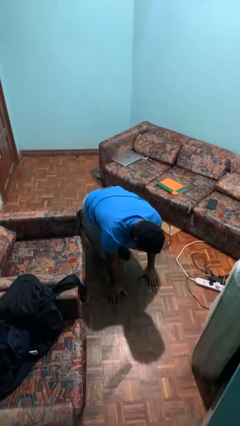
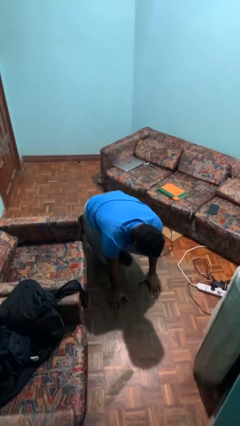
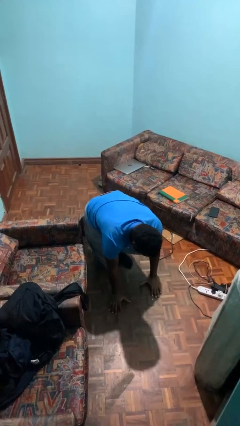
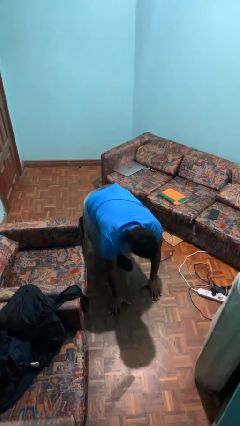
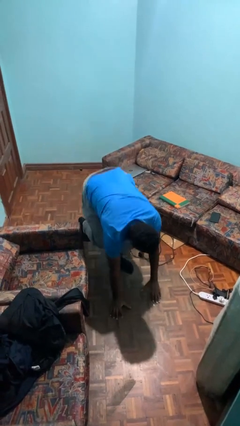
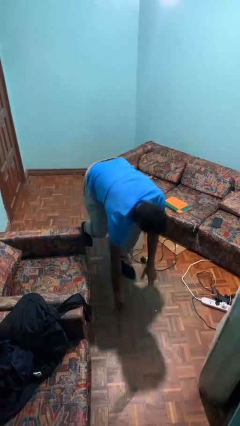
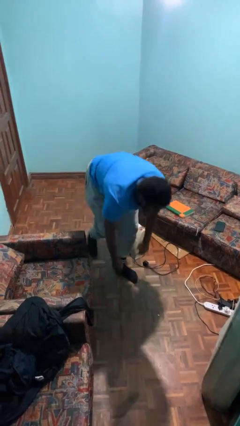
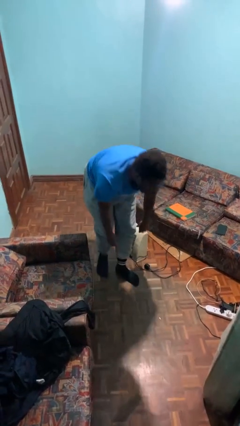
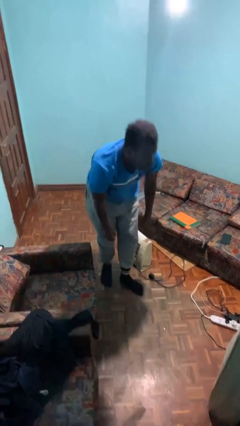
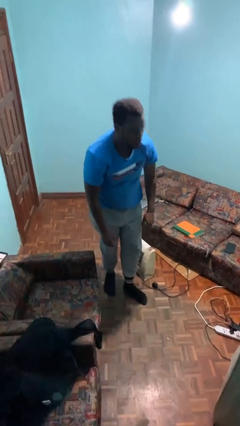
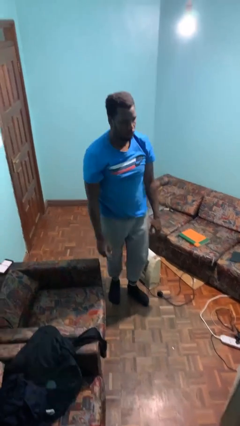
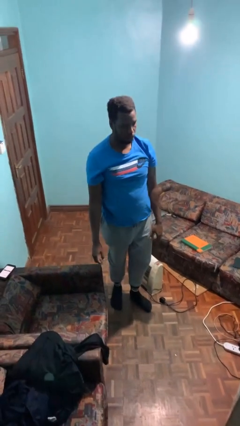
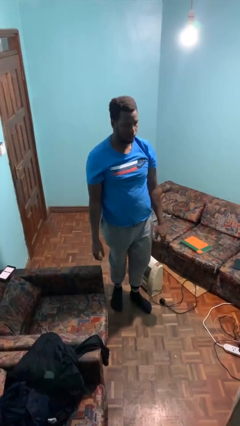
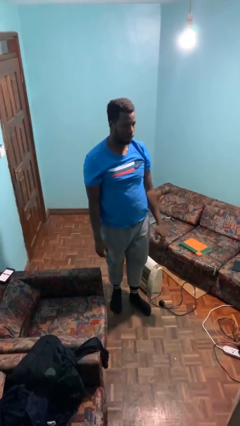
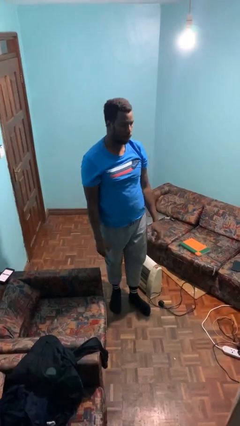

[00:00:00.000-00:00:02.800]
person stands up from floor

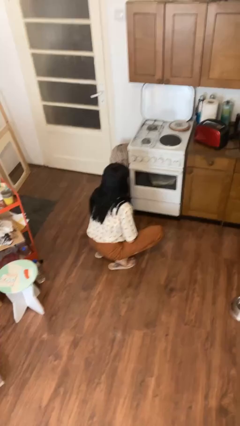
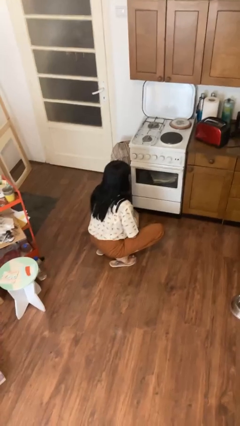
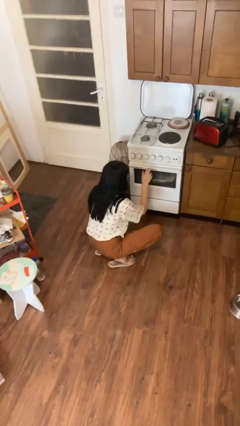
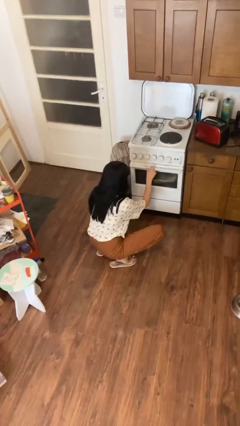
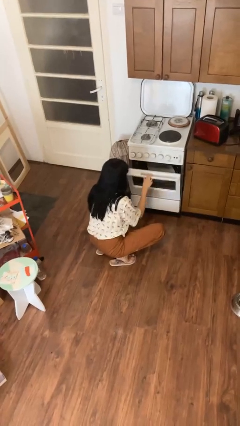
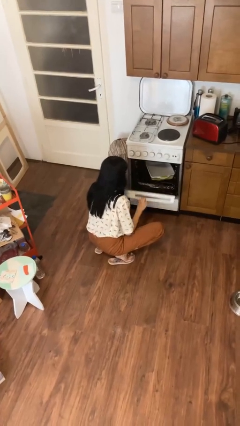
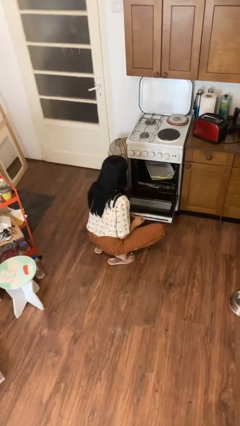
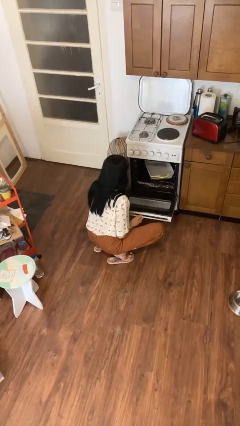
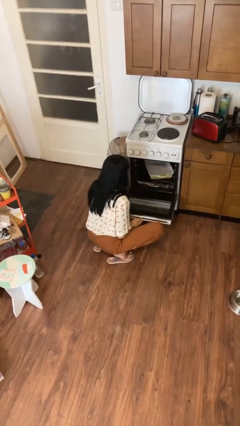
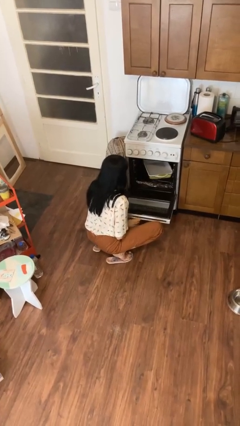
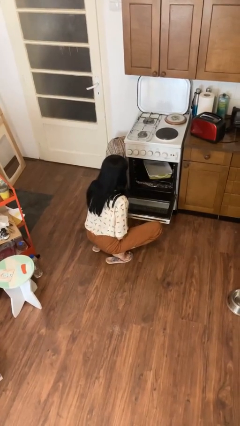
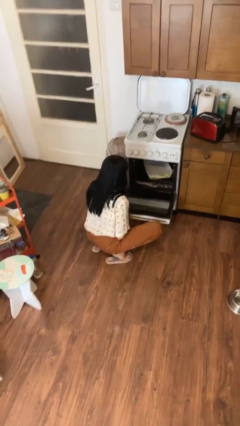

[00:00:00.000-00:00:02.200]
person opens oven door

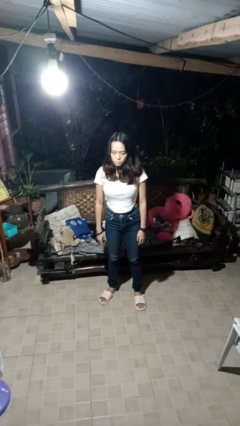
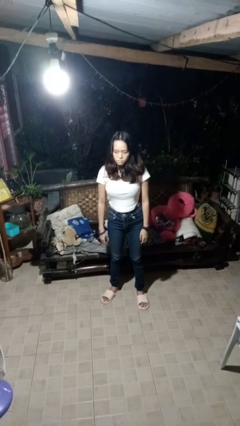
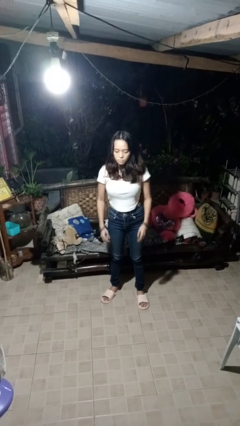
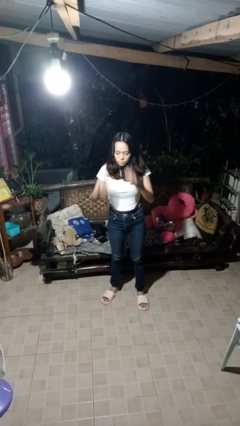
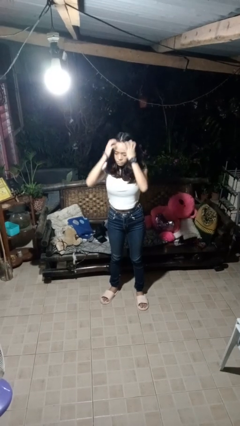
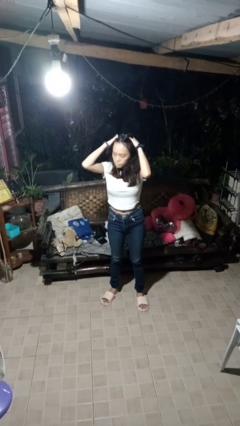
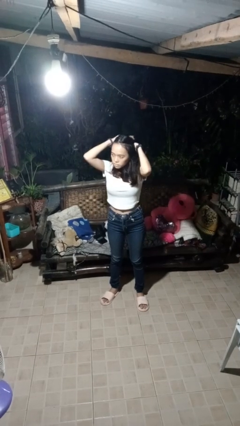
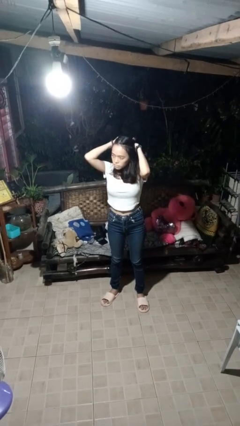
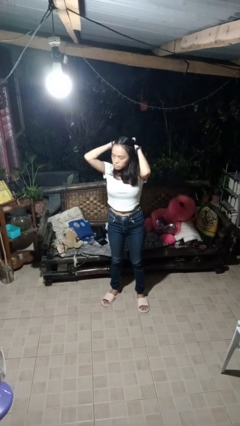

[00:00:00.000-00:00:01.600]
person strokes hair

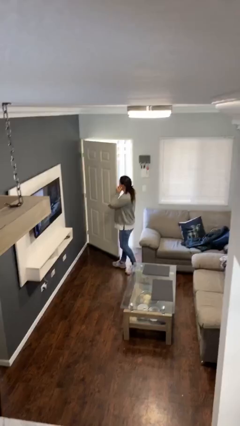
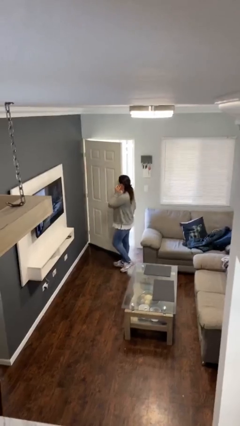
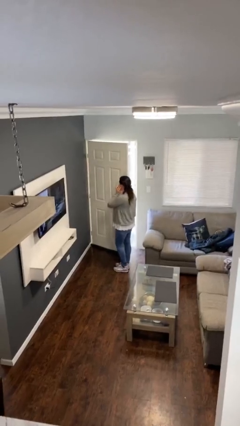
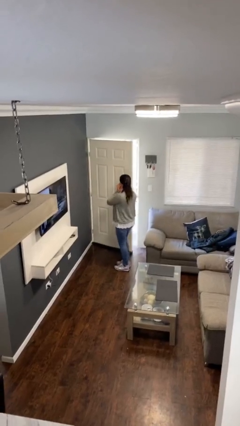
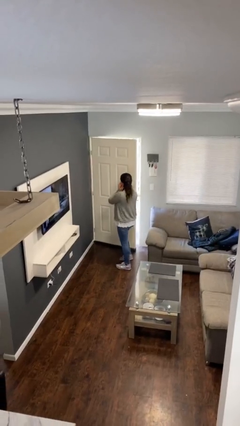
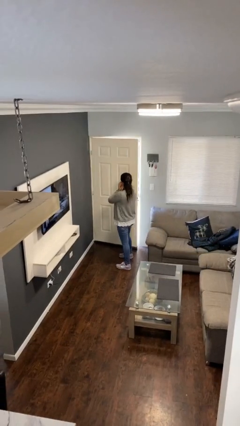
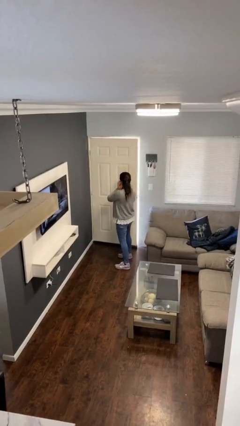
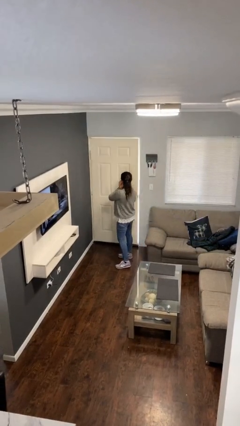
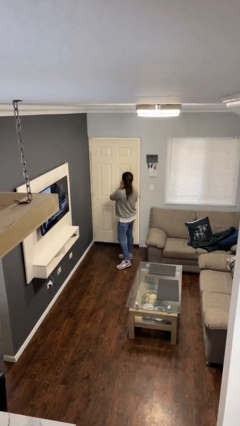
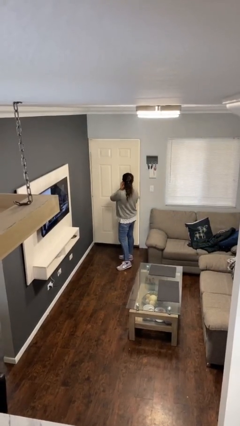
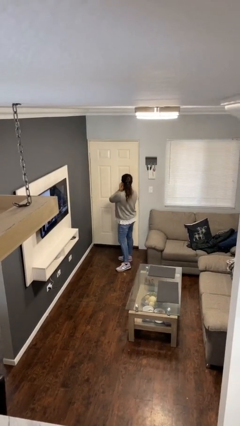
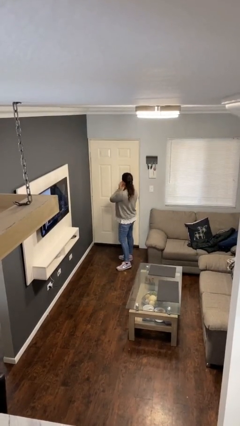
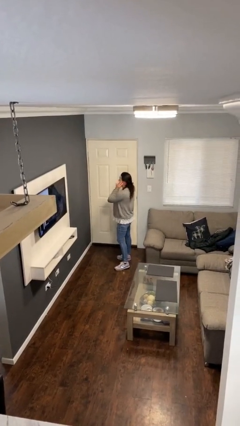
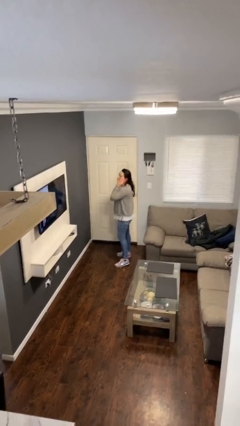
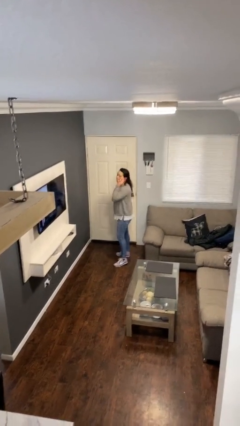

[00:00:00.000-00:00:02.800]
person closes facility door

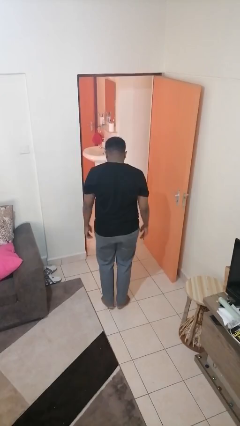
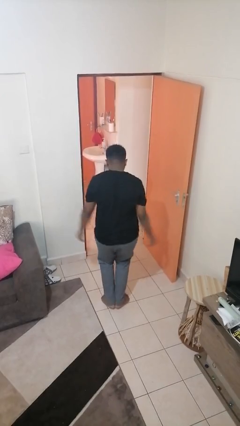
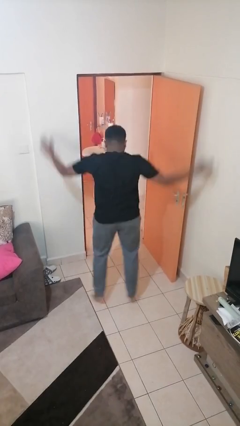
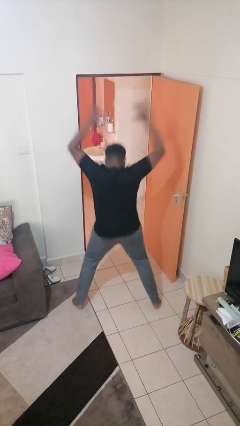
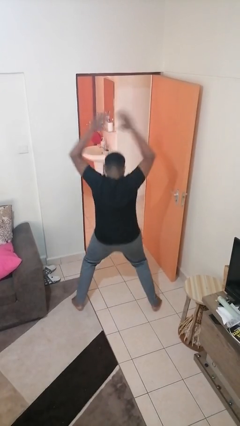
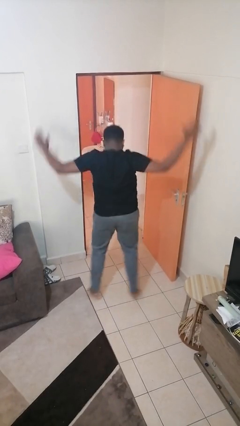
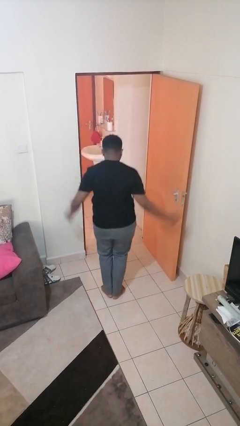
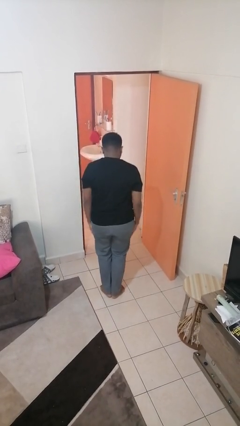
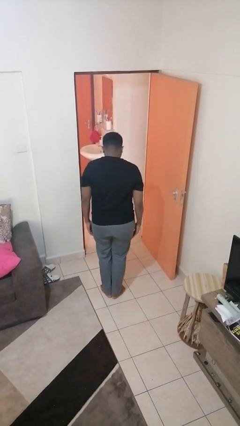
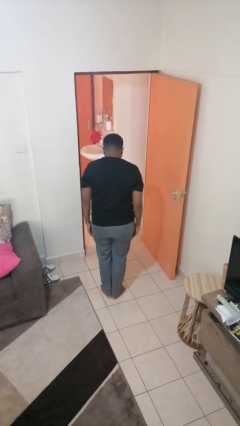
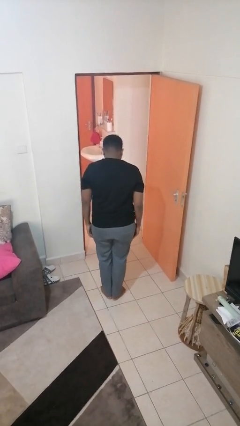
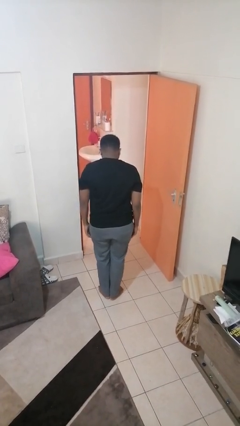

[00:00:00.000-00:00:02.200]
person exercises with jumping jacks

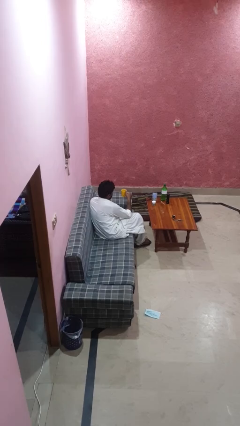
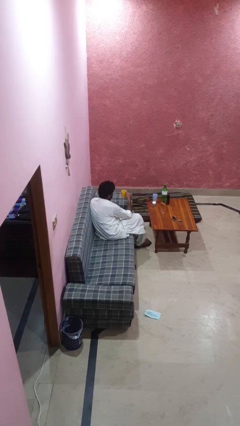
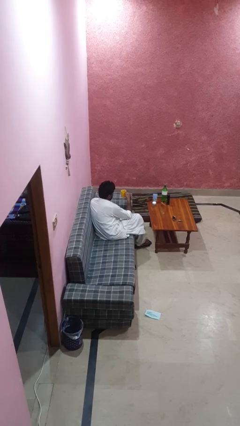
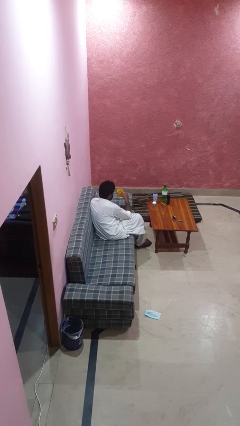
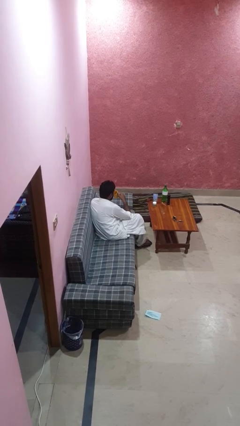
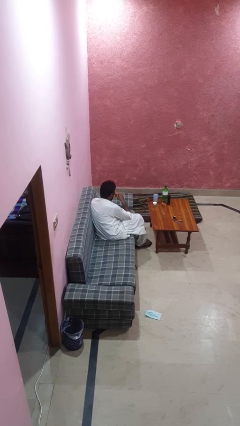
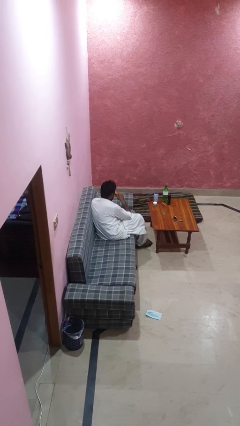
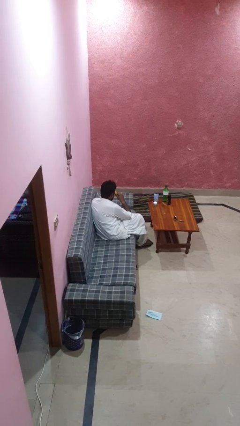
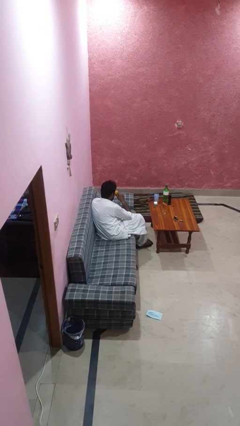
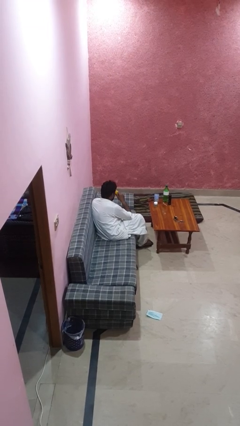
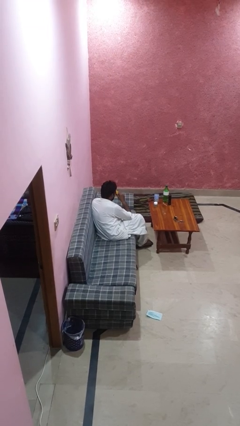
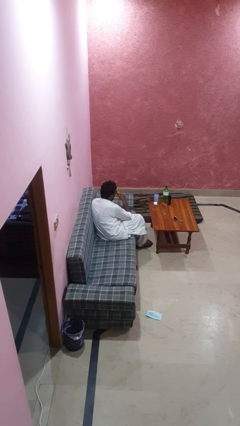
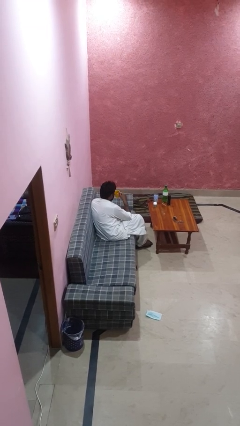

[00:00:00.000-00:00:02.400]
person drinks from mug

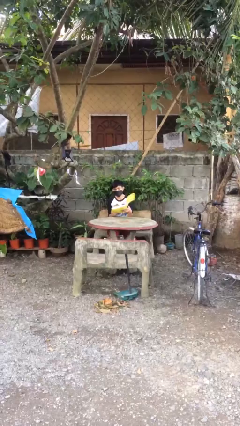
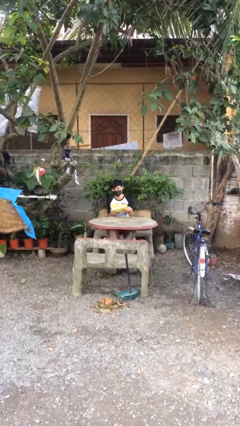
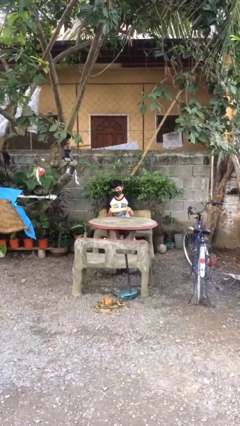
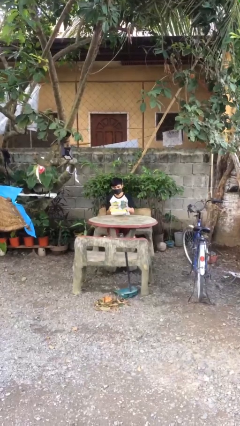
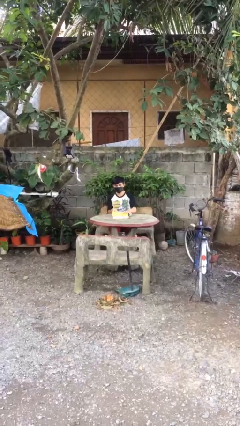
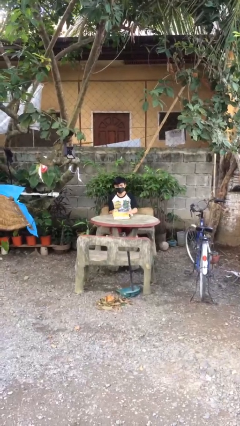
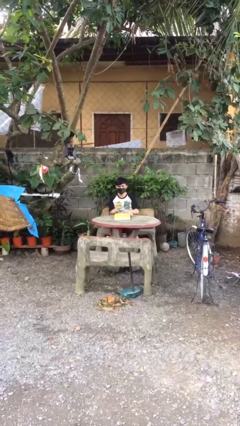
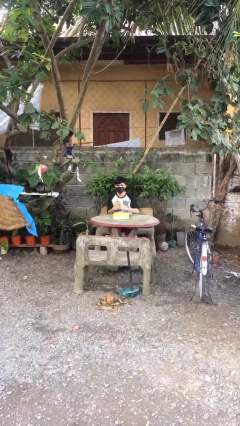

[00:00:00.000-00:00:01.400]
person puts down object on table

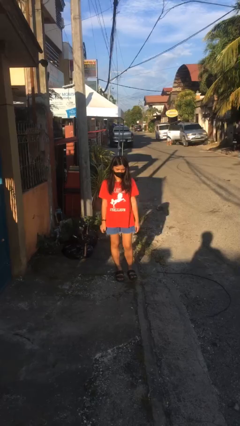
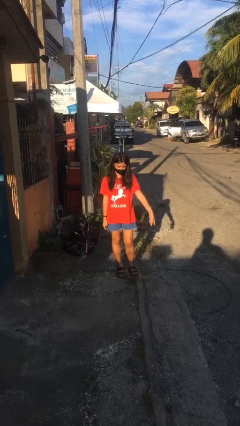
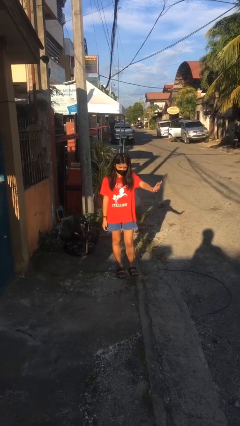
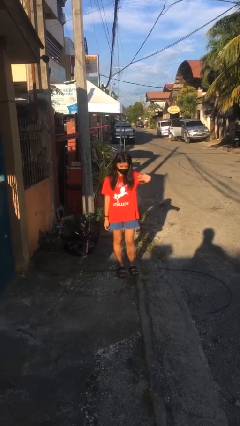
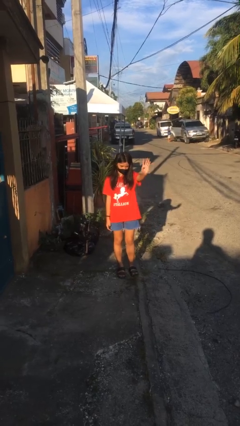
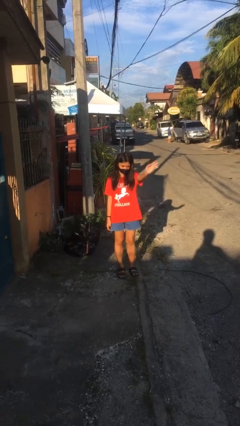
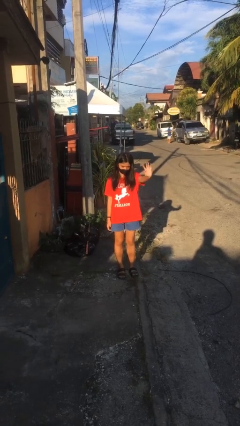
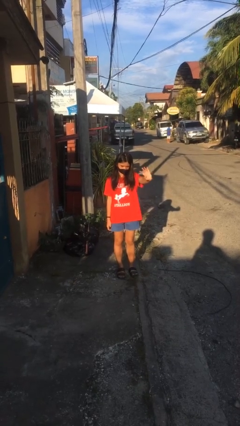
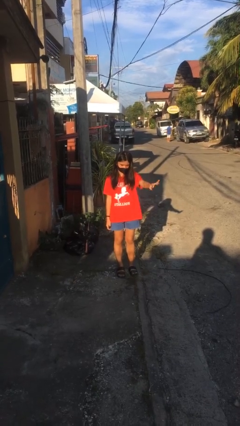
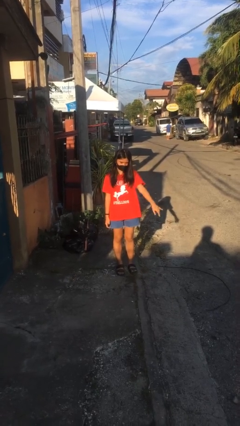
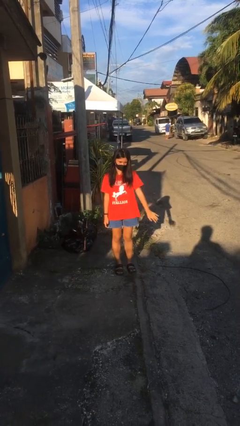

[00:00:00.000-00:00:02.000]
person waves at person
